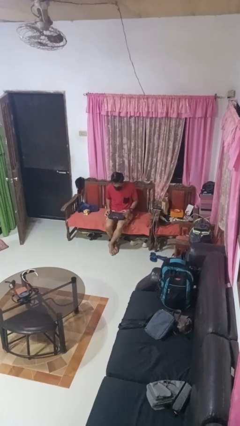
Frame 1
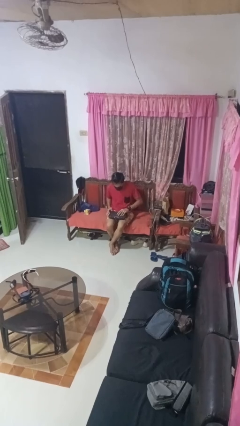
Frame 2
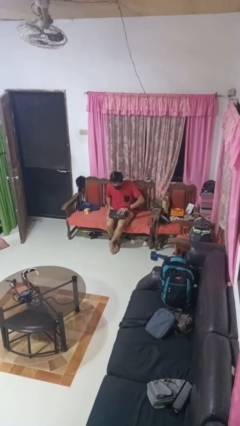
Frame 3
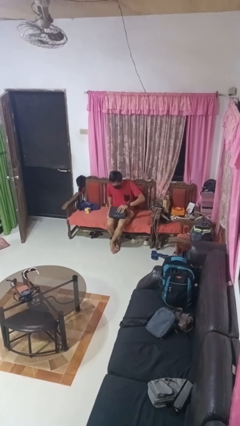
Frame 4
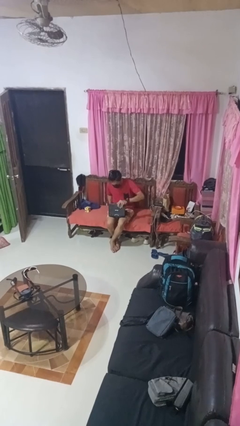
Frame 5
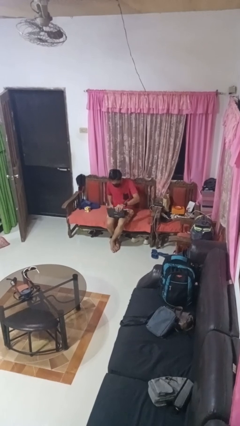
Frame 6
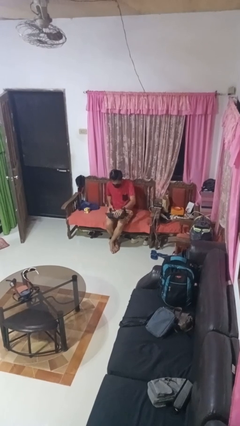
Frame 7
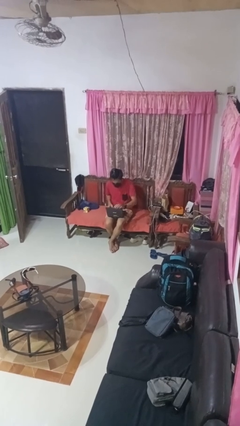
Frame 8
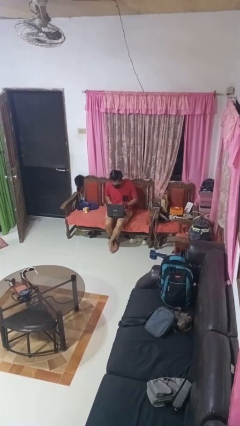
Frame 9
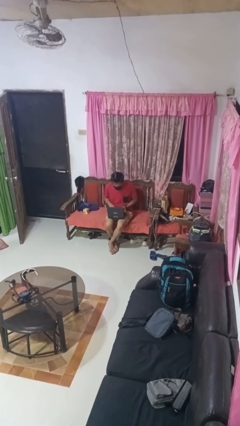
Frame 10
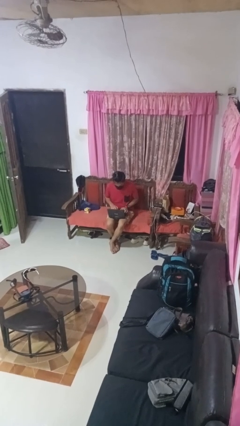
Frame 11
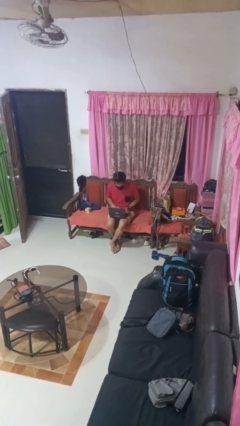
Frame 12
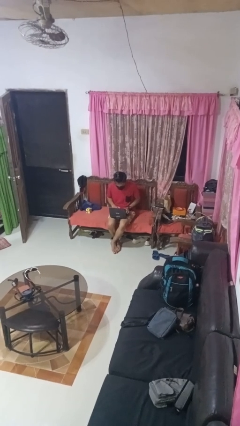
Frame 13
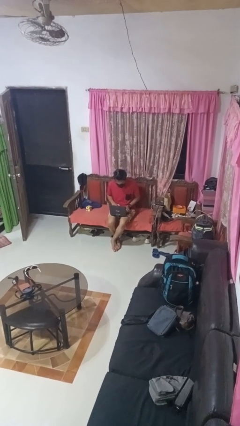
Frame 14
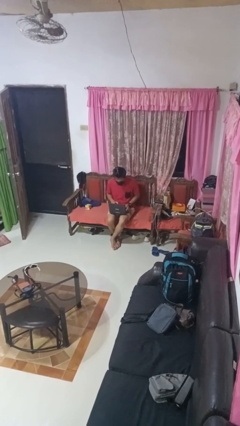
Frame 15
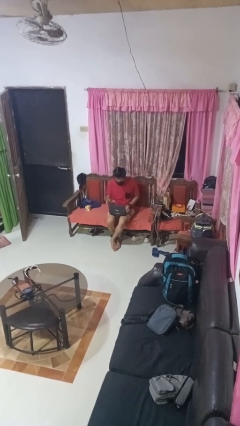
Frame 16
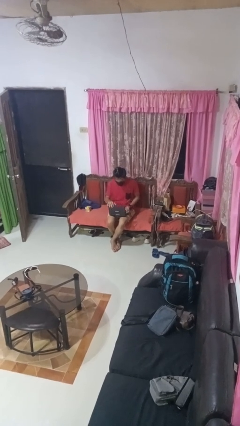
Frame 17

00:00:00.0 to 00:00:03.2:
person opens laptop

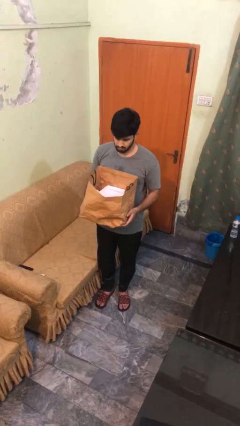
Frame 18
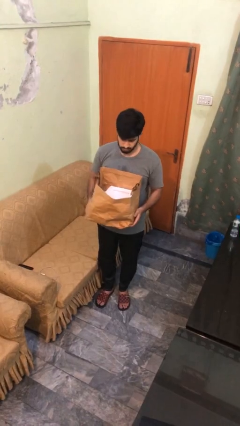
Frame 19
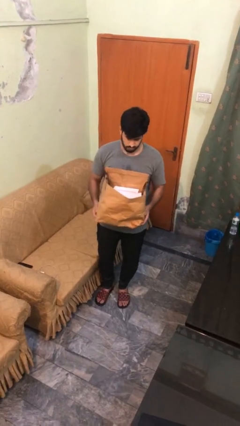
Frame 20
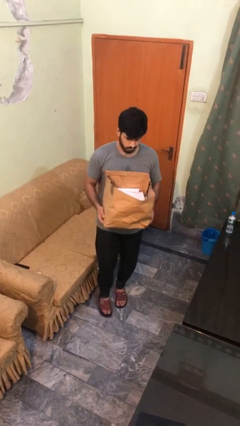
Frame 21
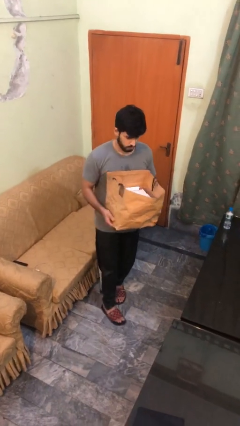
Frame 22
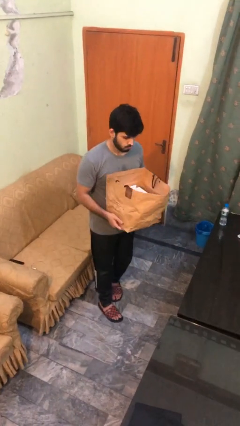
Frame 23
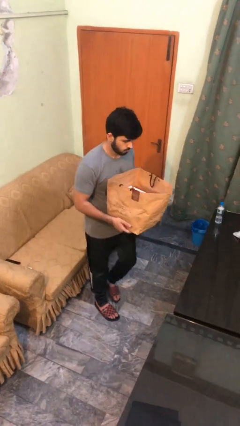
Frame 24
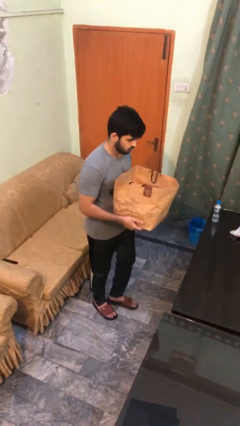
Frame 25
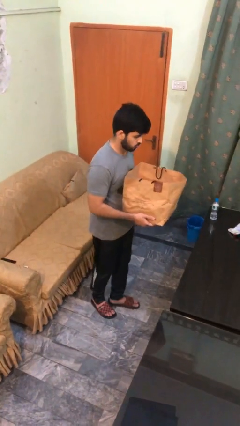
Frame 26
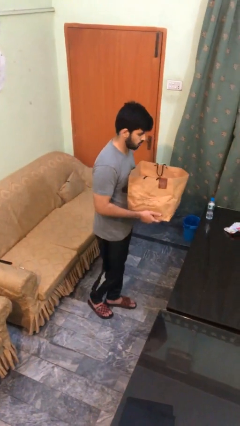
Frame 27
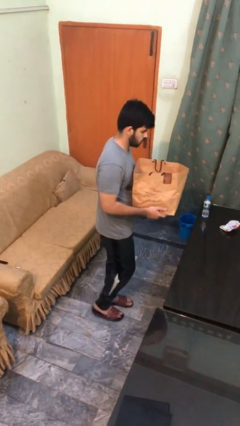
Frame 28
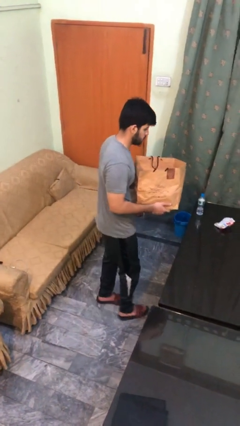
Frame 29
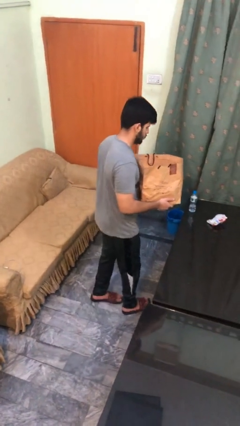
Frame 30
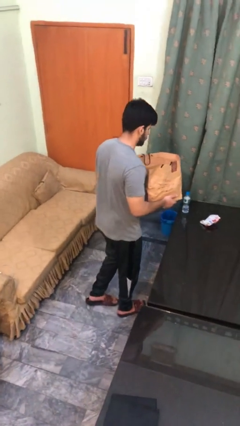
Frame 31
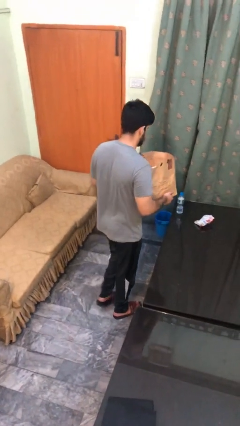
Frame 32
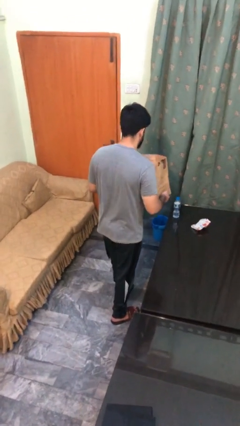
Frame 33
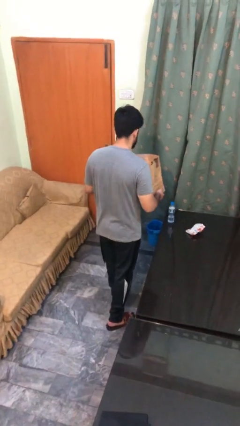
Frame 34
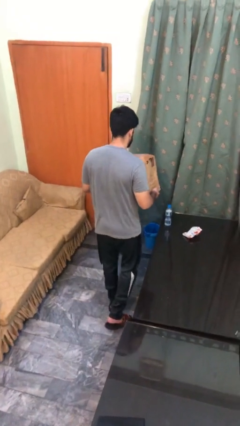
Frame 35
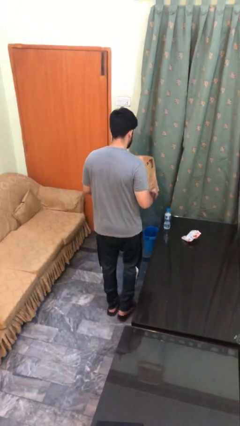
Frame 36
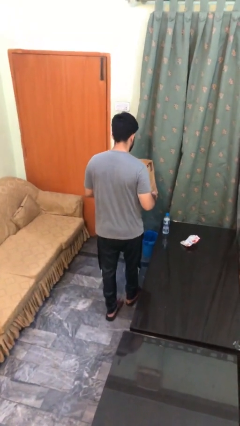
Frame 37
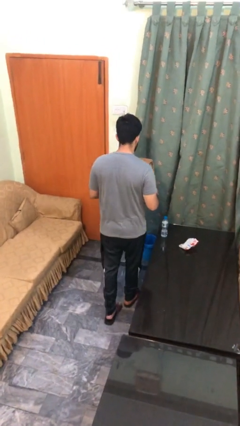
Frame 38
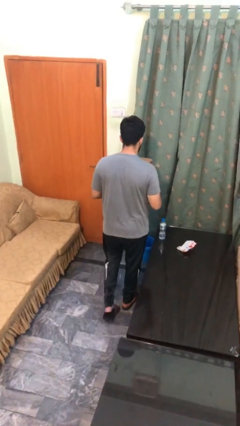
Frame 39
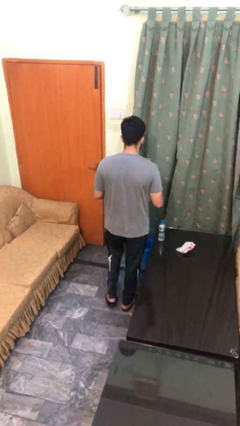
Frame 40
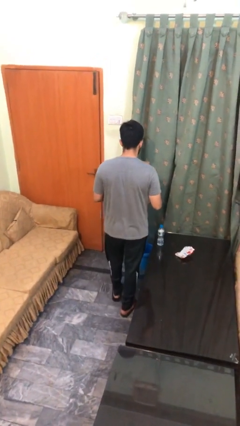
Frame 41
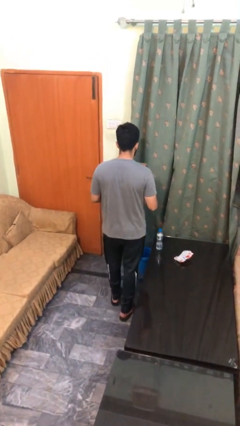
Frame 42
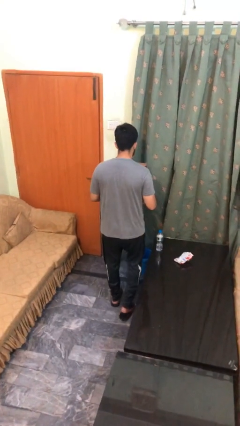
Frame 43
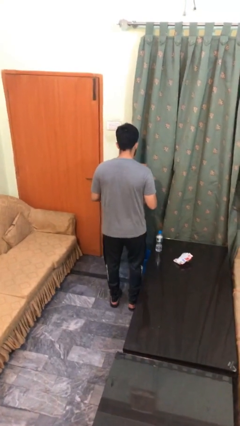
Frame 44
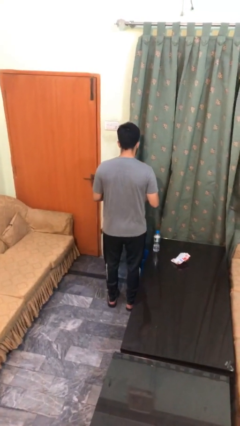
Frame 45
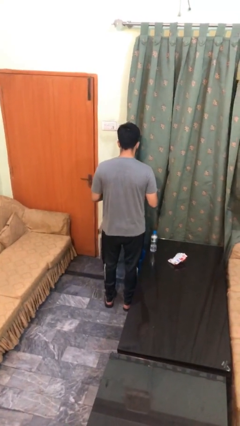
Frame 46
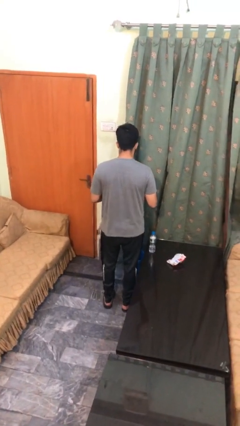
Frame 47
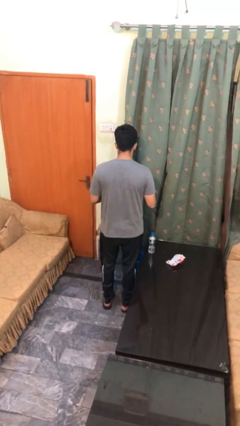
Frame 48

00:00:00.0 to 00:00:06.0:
person carries groceries

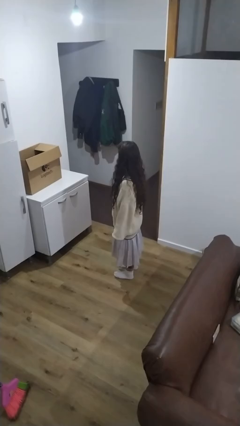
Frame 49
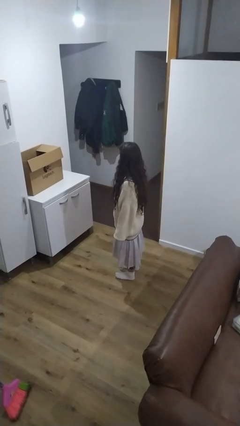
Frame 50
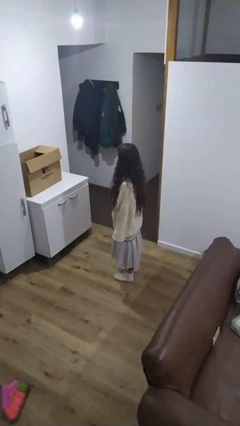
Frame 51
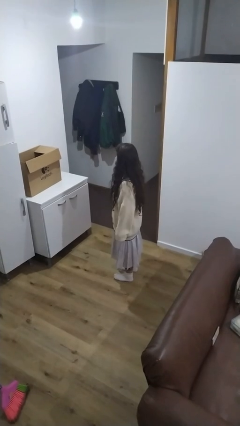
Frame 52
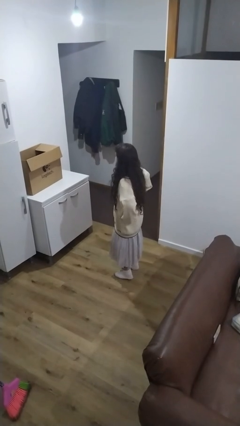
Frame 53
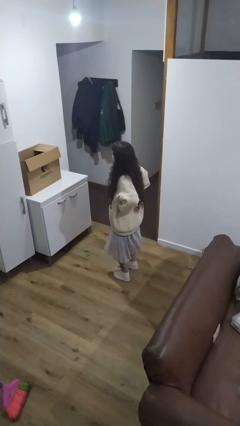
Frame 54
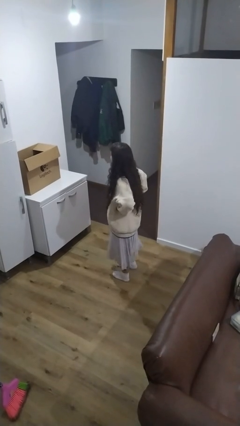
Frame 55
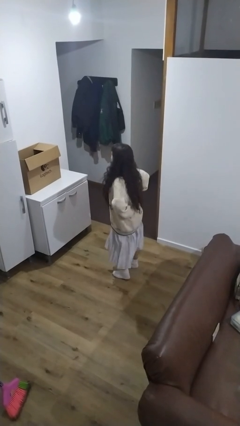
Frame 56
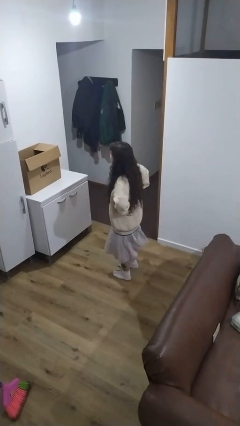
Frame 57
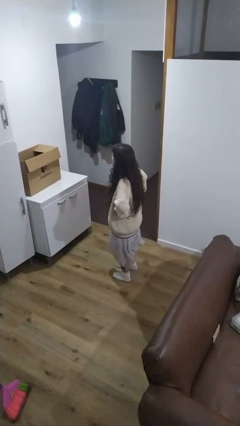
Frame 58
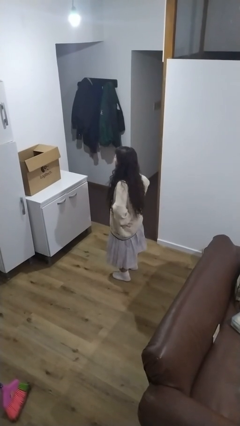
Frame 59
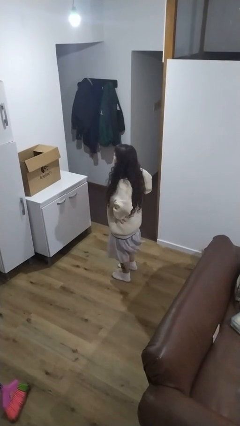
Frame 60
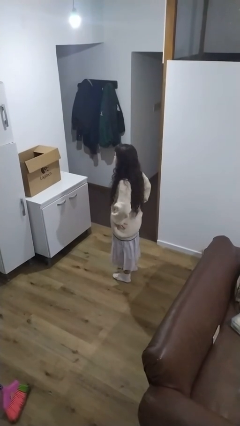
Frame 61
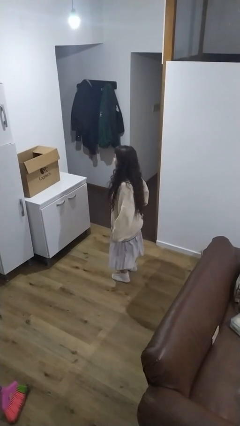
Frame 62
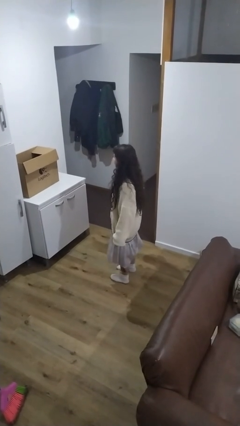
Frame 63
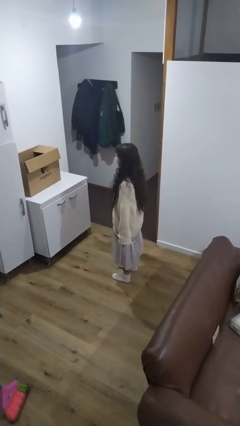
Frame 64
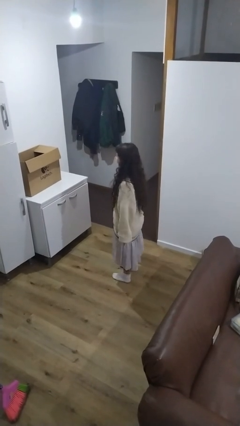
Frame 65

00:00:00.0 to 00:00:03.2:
person wiggles hips

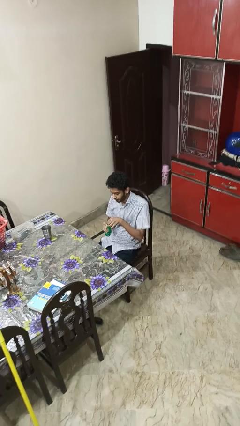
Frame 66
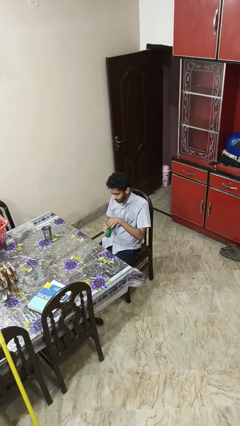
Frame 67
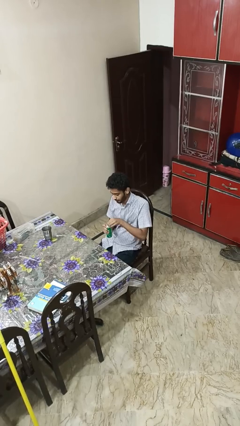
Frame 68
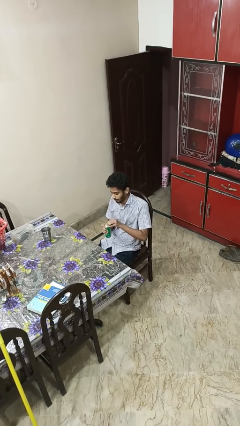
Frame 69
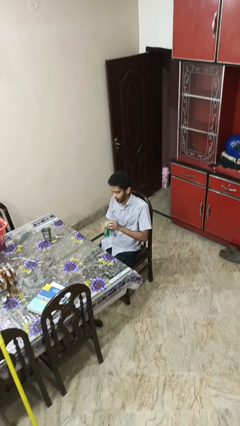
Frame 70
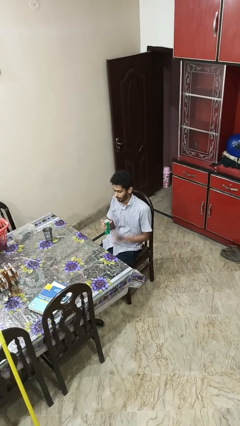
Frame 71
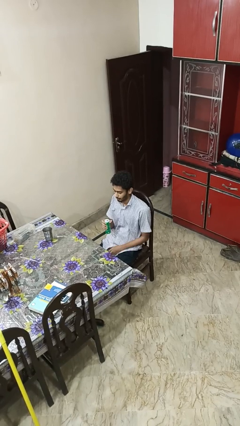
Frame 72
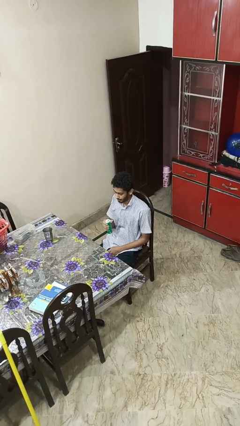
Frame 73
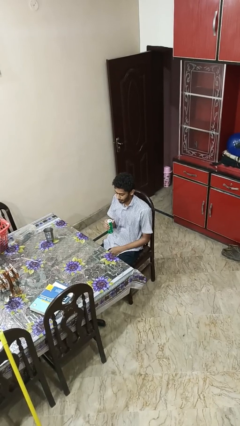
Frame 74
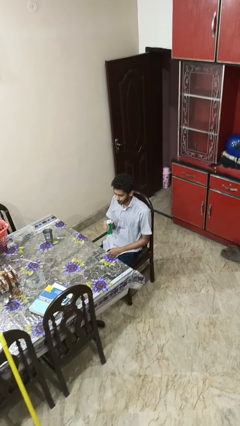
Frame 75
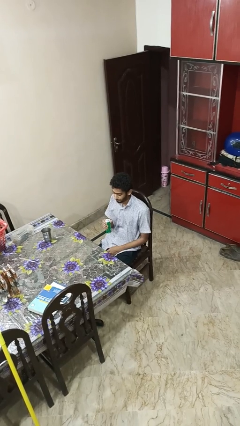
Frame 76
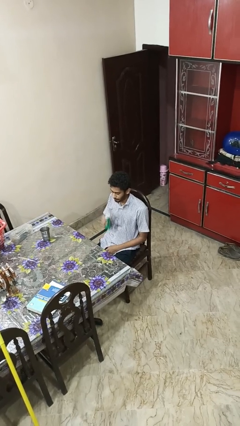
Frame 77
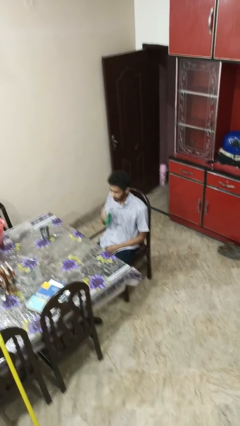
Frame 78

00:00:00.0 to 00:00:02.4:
person opens beverage can

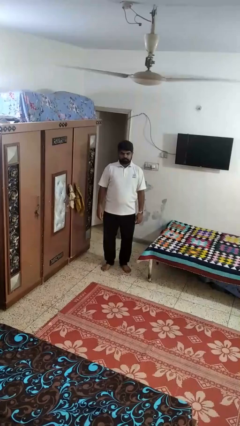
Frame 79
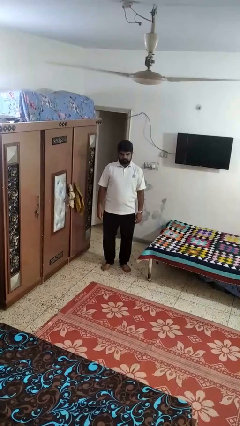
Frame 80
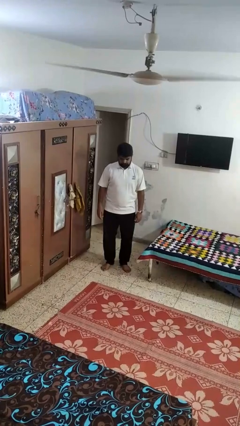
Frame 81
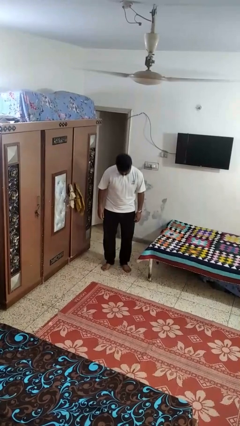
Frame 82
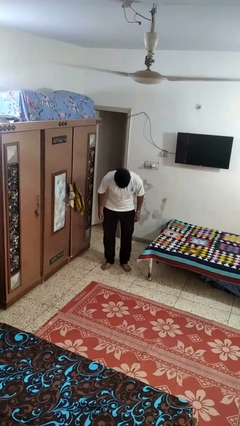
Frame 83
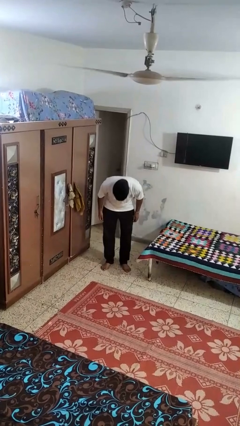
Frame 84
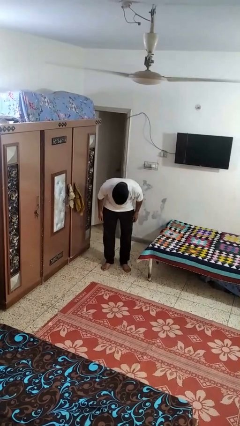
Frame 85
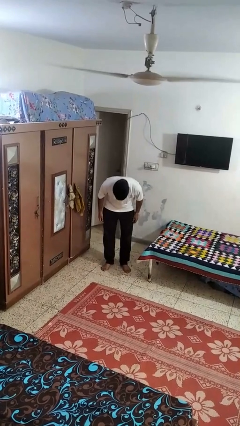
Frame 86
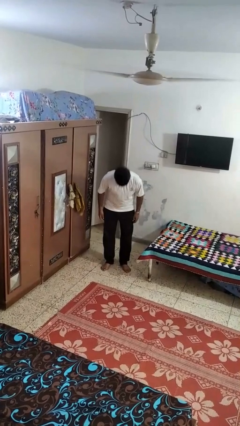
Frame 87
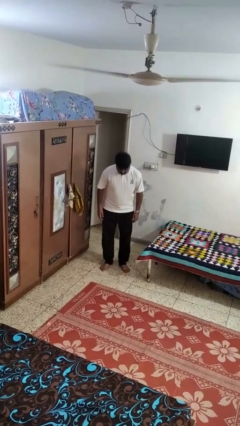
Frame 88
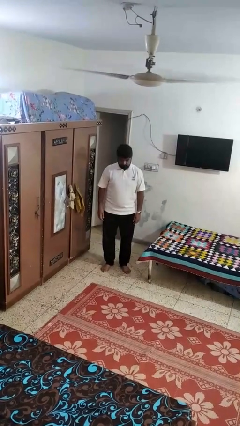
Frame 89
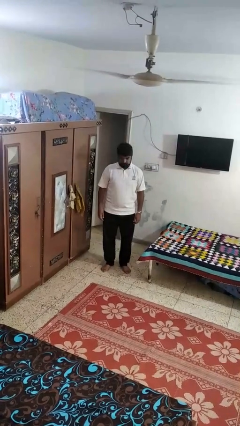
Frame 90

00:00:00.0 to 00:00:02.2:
person bows

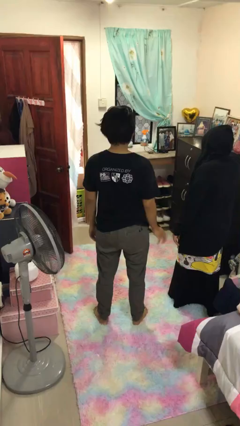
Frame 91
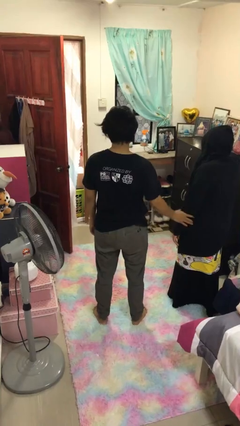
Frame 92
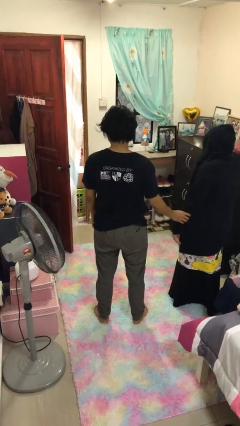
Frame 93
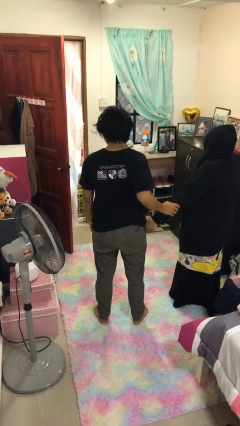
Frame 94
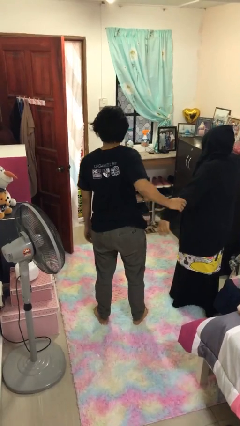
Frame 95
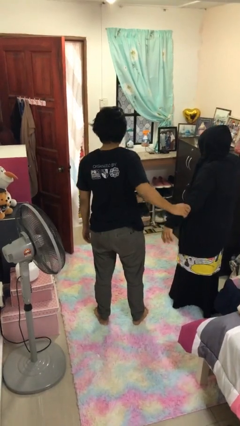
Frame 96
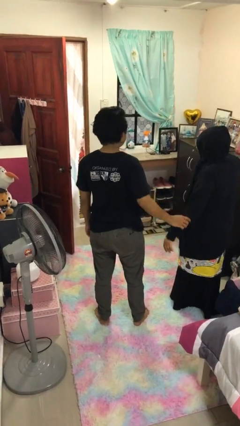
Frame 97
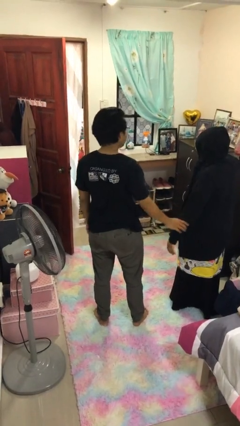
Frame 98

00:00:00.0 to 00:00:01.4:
person grabs person by forearm
